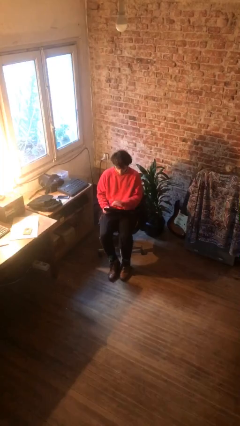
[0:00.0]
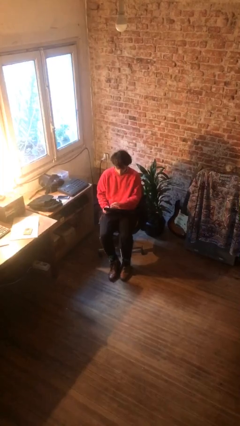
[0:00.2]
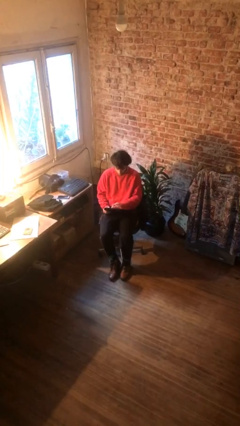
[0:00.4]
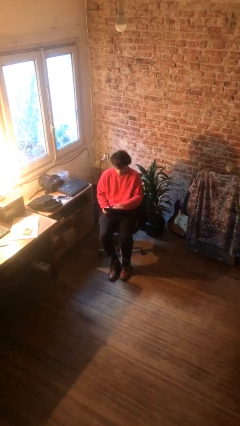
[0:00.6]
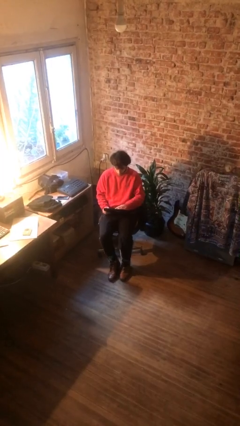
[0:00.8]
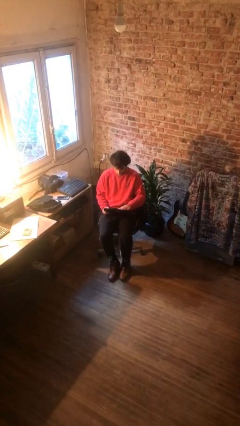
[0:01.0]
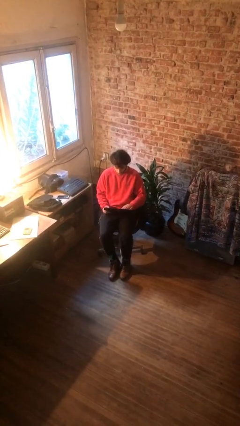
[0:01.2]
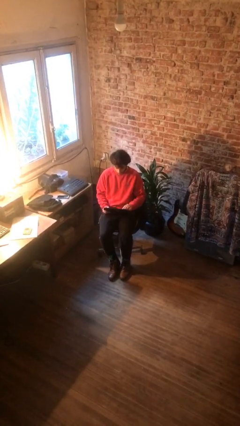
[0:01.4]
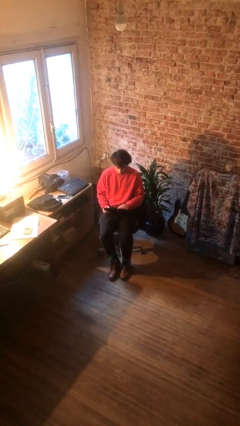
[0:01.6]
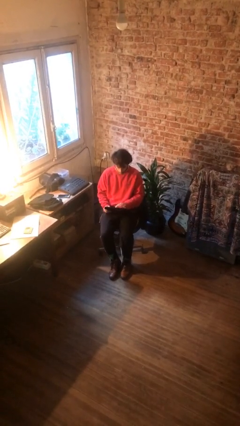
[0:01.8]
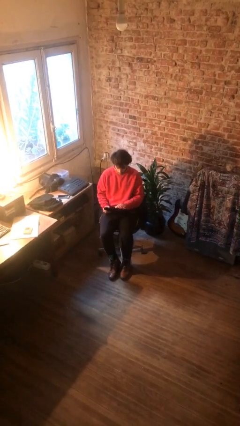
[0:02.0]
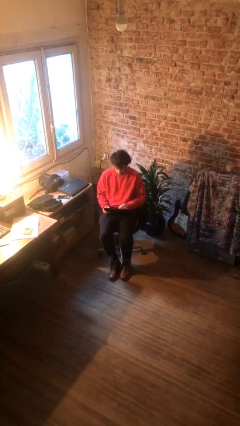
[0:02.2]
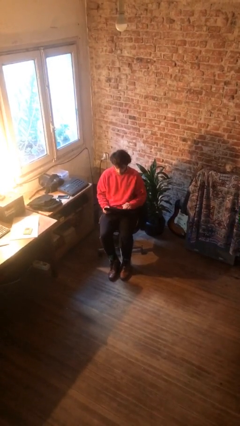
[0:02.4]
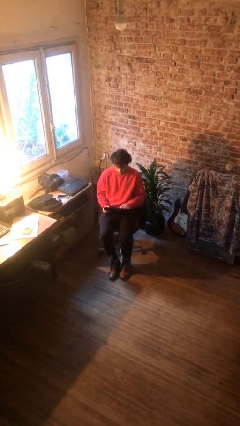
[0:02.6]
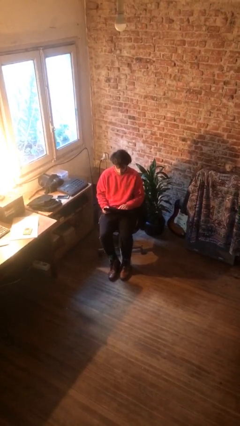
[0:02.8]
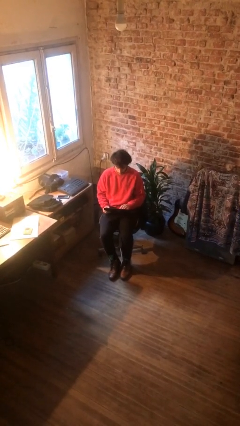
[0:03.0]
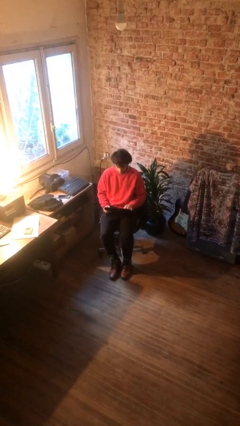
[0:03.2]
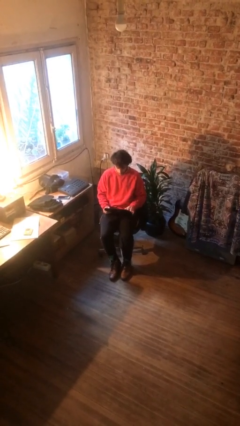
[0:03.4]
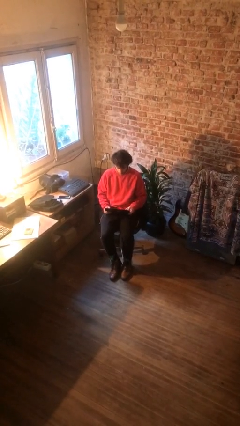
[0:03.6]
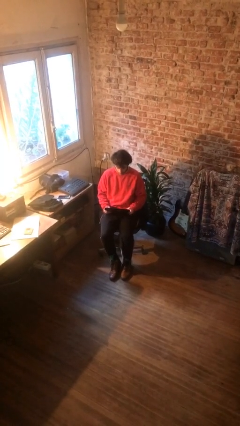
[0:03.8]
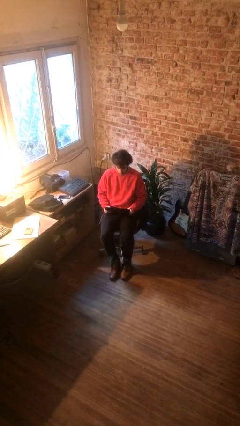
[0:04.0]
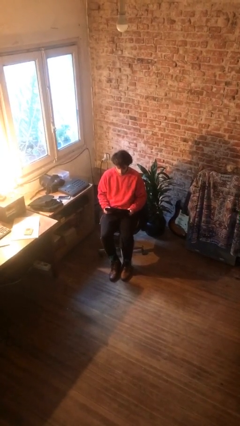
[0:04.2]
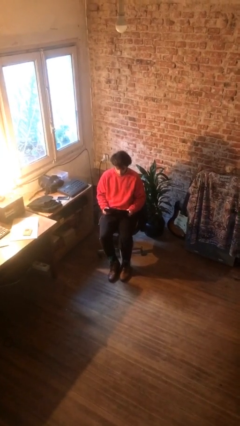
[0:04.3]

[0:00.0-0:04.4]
person interacts with tablet

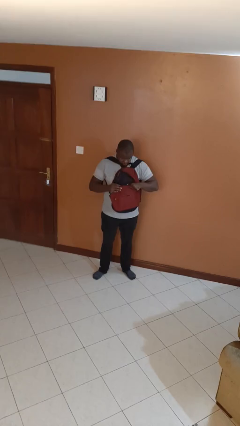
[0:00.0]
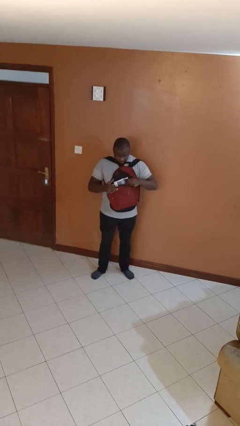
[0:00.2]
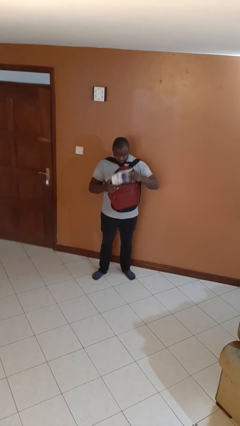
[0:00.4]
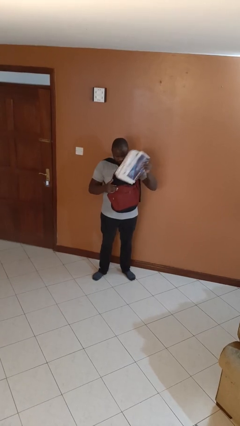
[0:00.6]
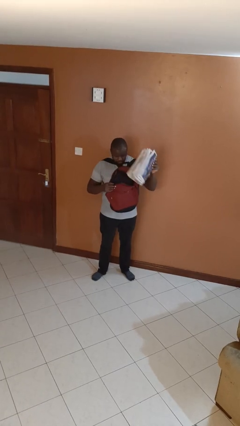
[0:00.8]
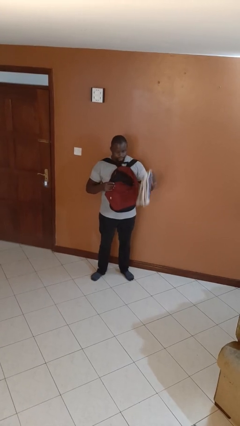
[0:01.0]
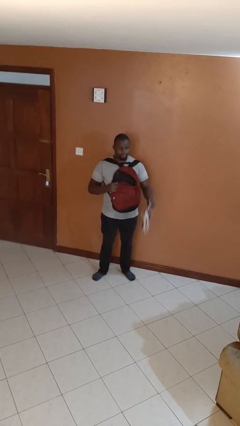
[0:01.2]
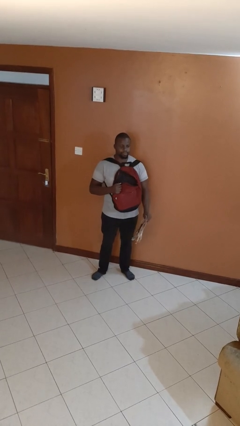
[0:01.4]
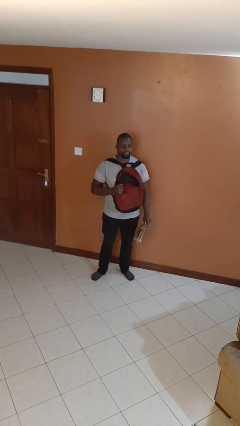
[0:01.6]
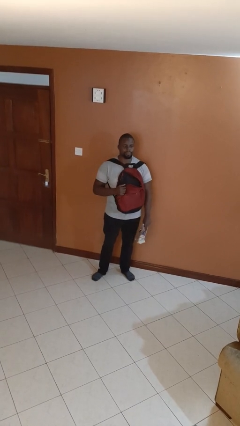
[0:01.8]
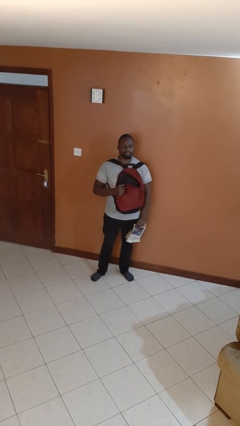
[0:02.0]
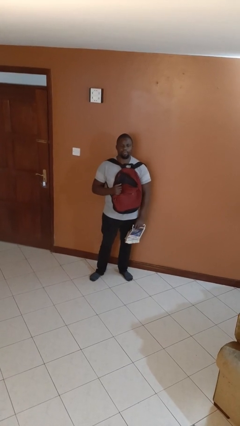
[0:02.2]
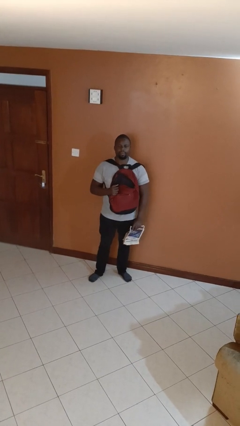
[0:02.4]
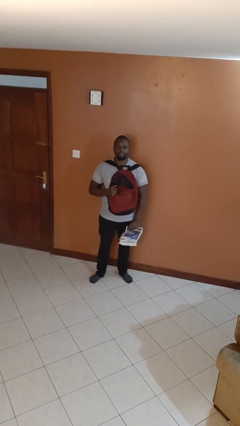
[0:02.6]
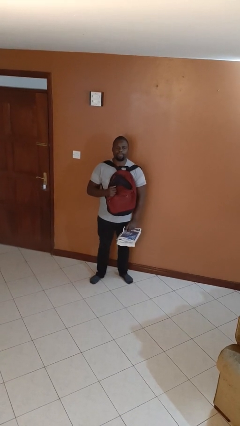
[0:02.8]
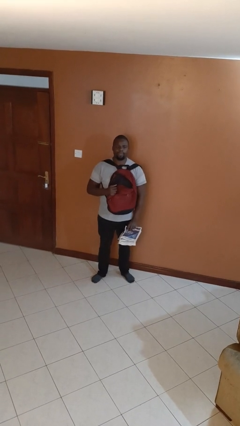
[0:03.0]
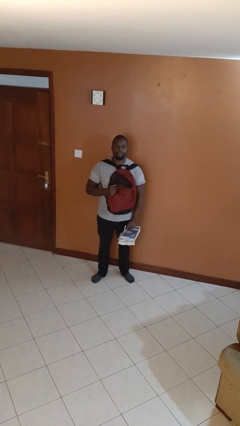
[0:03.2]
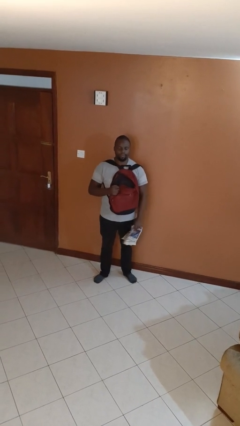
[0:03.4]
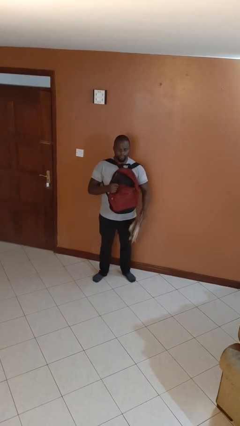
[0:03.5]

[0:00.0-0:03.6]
person takes object from backpack

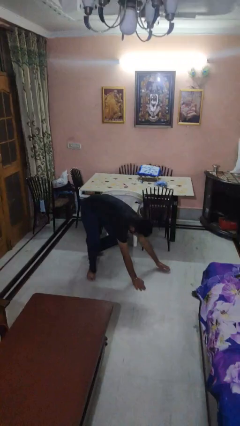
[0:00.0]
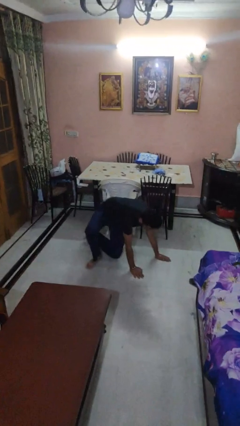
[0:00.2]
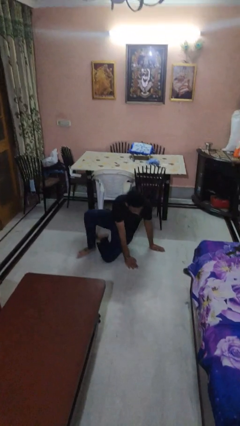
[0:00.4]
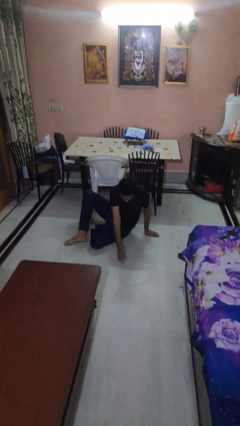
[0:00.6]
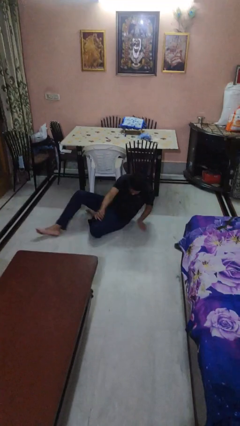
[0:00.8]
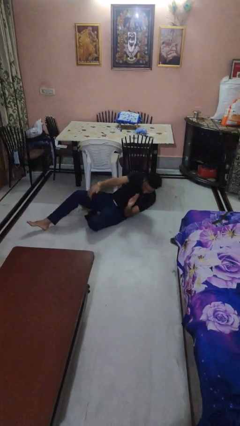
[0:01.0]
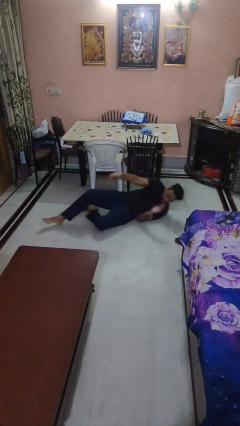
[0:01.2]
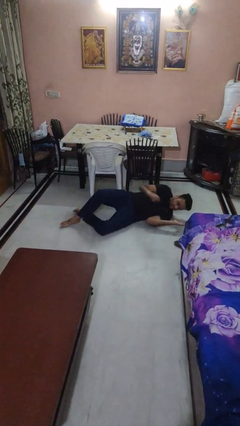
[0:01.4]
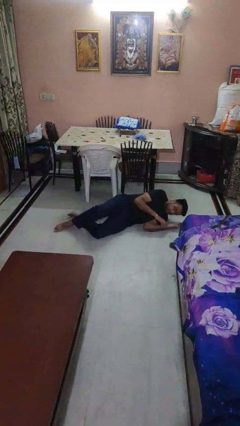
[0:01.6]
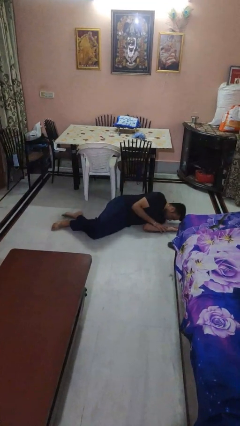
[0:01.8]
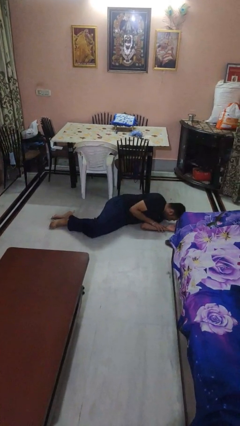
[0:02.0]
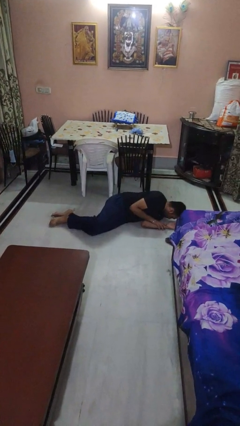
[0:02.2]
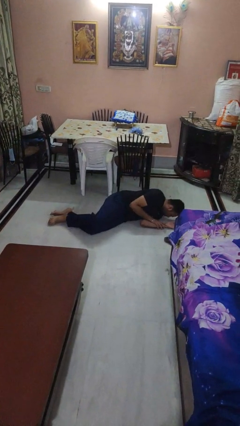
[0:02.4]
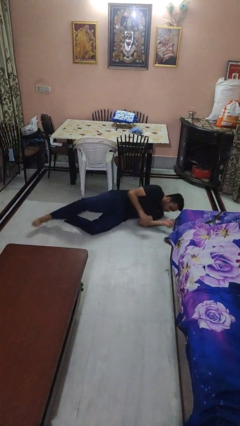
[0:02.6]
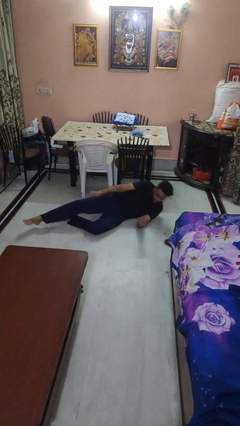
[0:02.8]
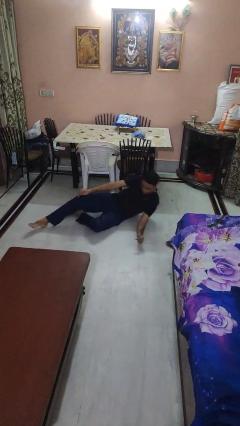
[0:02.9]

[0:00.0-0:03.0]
person lies down on floor

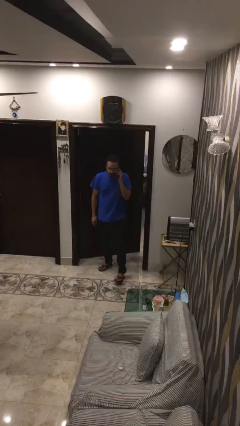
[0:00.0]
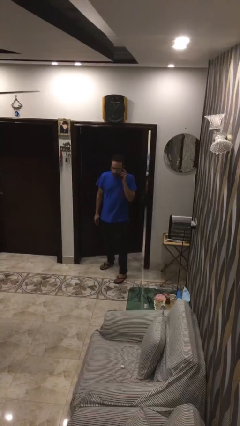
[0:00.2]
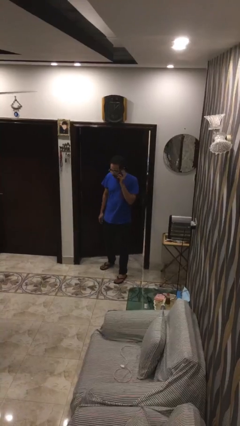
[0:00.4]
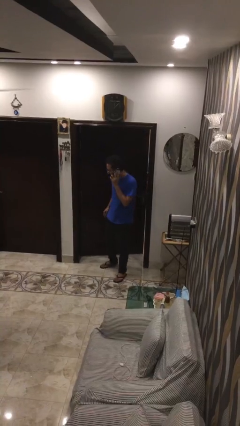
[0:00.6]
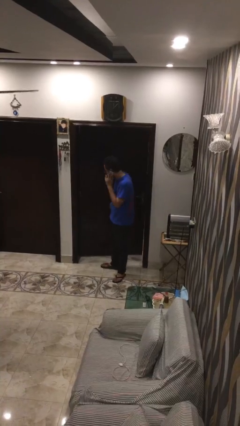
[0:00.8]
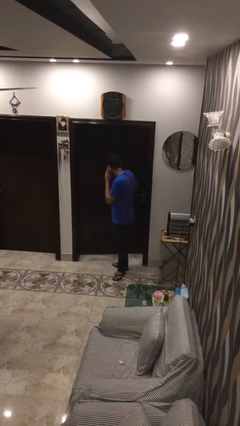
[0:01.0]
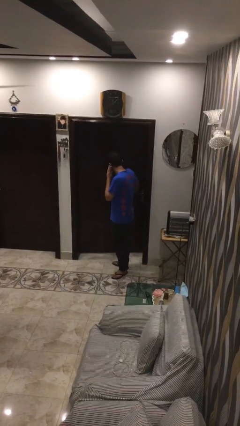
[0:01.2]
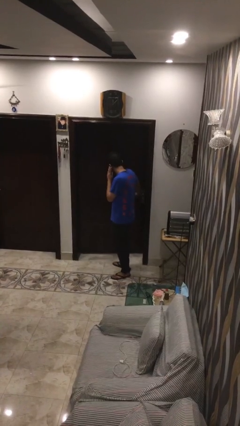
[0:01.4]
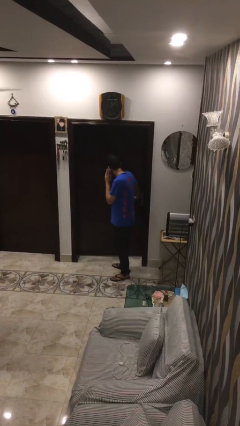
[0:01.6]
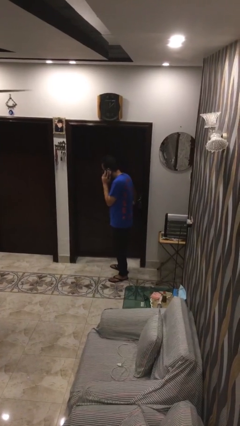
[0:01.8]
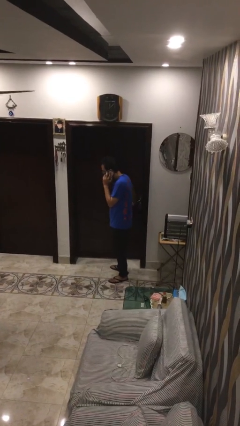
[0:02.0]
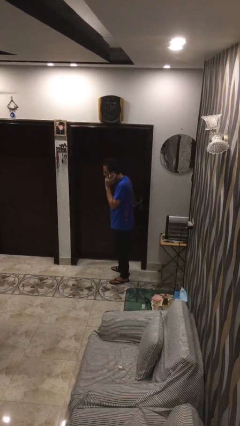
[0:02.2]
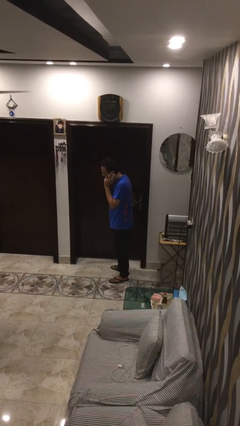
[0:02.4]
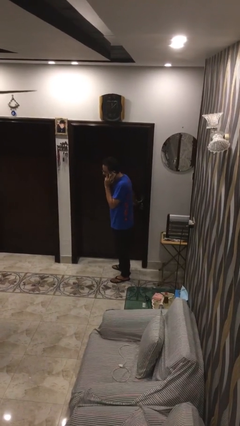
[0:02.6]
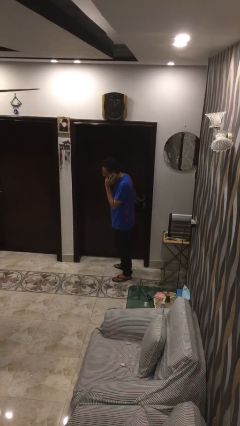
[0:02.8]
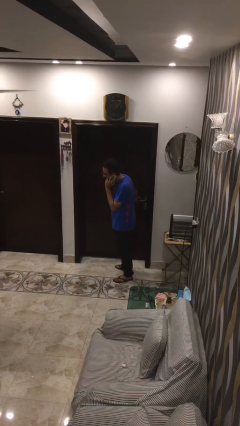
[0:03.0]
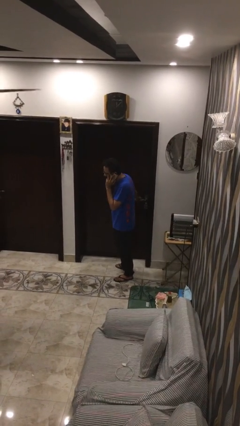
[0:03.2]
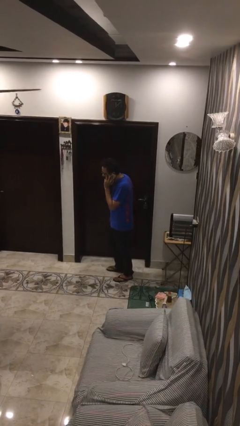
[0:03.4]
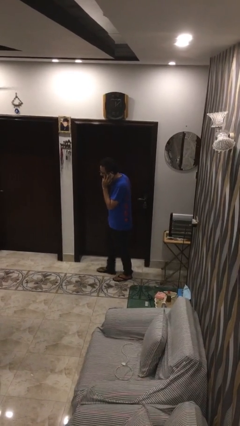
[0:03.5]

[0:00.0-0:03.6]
person closes facility door

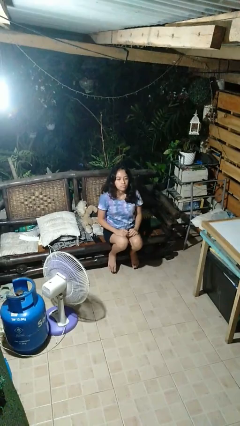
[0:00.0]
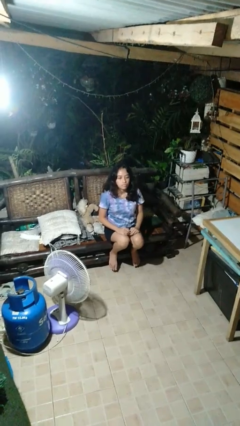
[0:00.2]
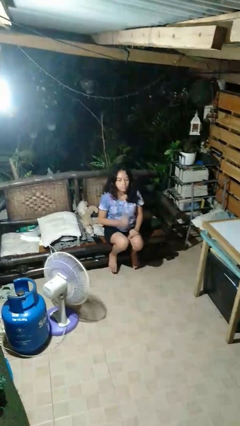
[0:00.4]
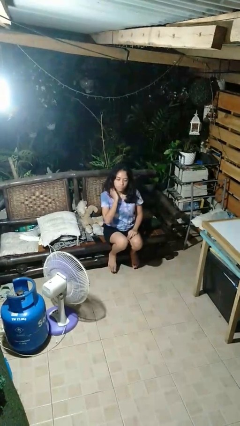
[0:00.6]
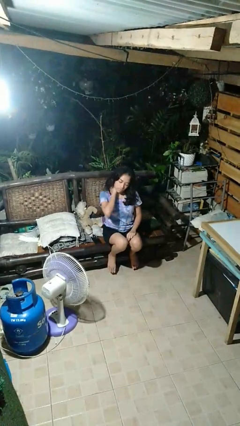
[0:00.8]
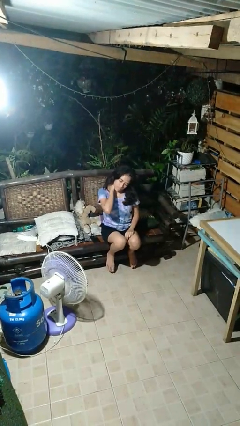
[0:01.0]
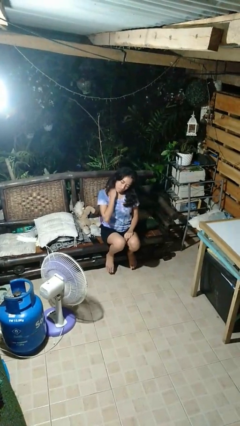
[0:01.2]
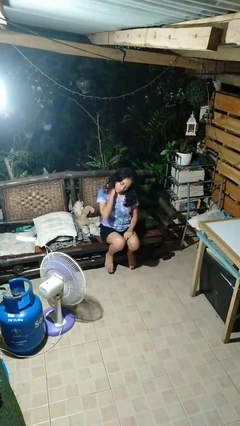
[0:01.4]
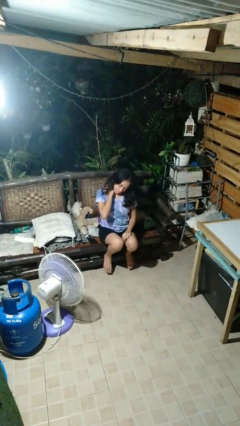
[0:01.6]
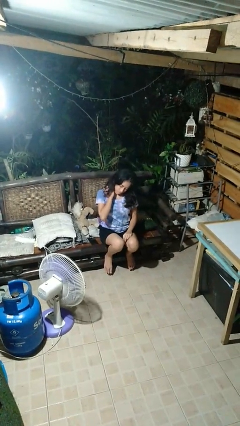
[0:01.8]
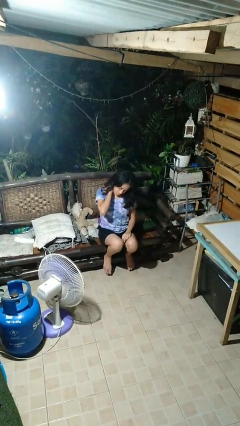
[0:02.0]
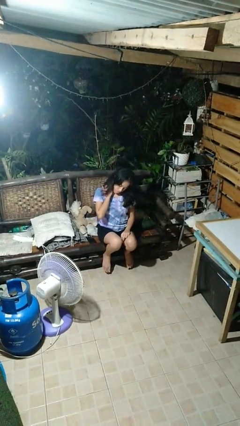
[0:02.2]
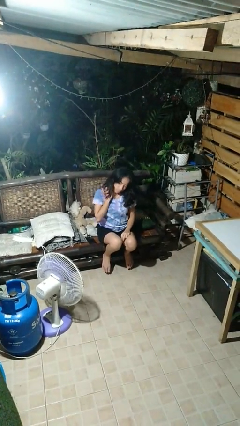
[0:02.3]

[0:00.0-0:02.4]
person rubs neck

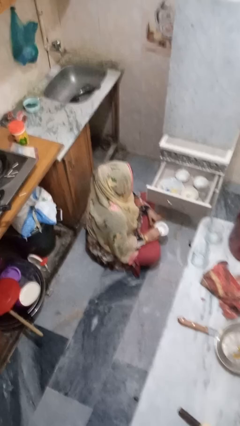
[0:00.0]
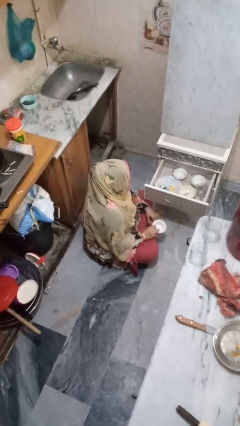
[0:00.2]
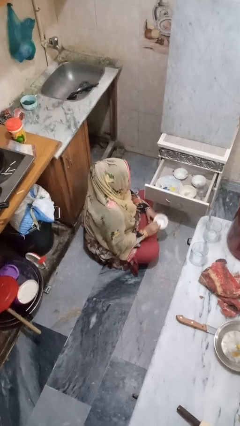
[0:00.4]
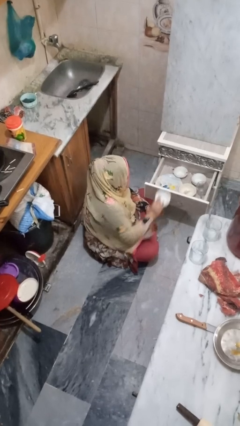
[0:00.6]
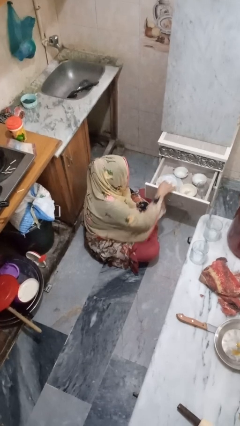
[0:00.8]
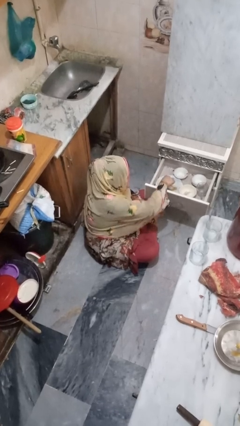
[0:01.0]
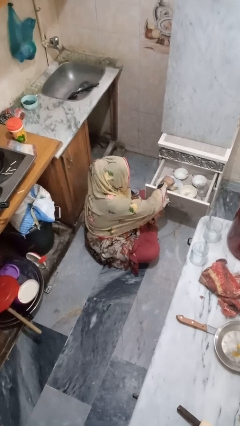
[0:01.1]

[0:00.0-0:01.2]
person puts object into kitchen drawer
